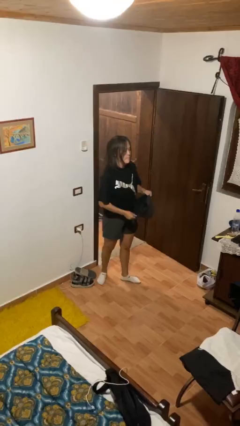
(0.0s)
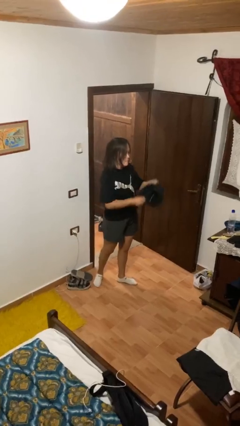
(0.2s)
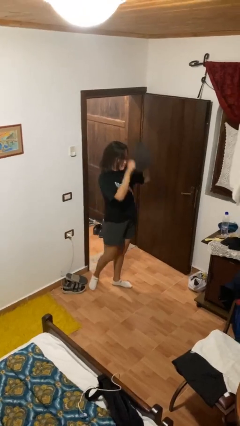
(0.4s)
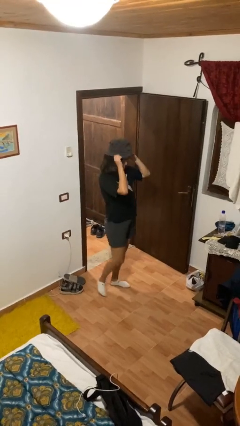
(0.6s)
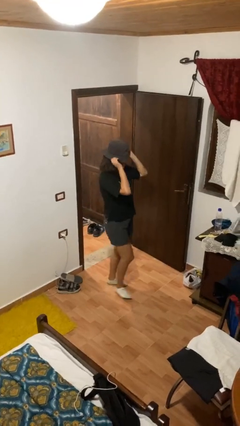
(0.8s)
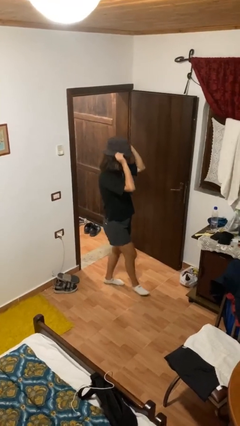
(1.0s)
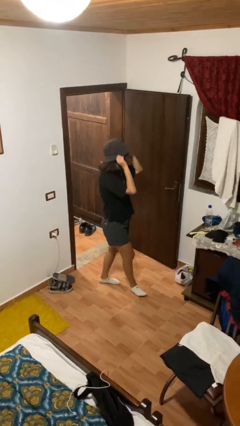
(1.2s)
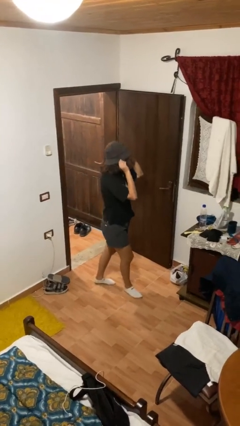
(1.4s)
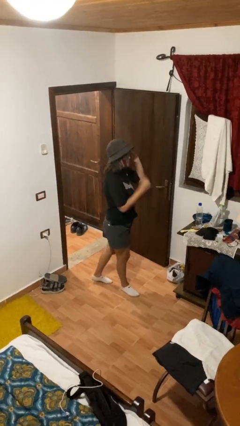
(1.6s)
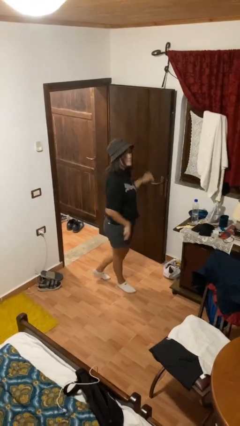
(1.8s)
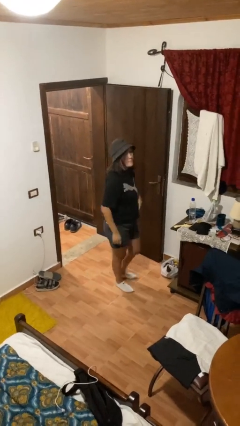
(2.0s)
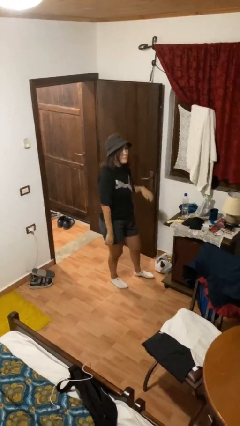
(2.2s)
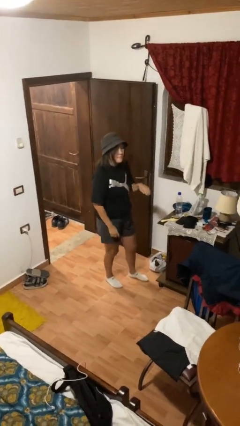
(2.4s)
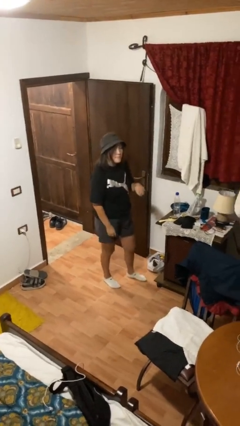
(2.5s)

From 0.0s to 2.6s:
person puts on hat

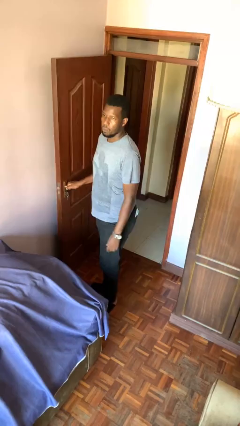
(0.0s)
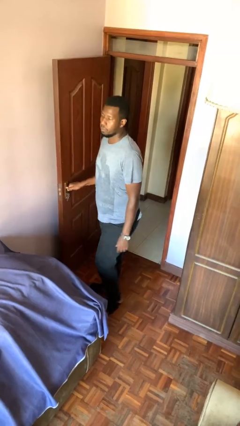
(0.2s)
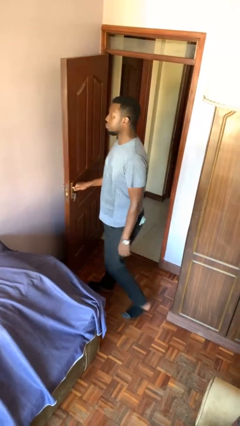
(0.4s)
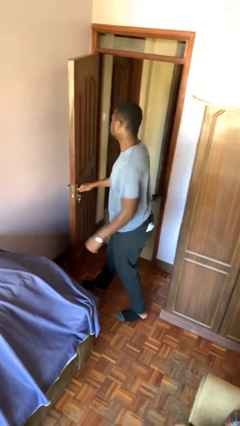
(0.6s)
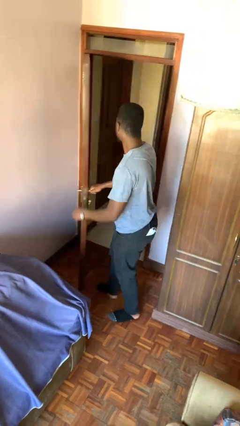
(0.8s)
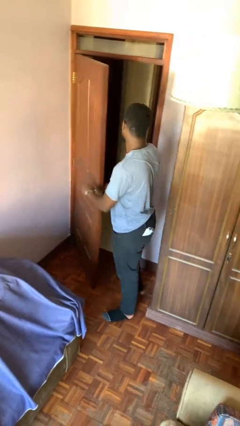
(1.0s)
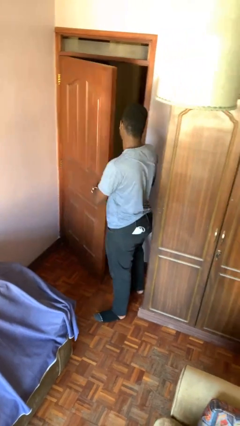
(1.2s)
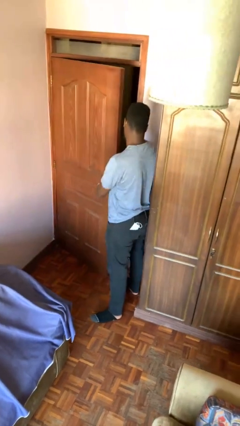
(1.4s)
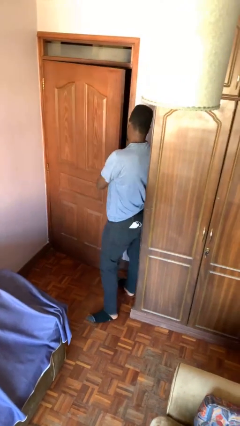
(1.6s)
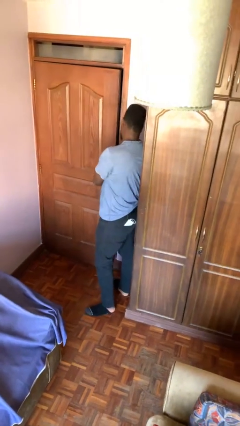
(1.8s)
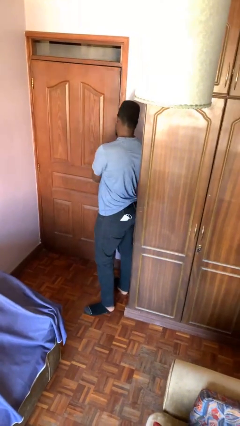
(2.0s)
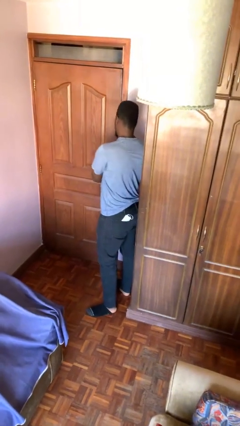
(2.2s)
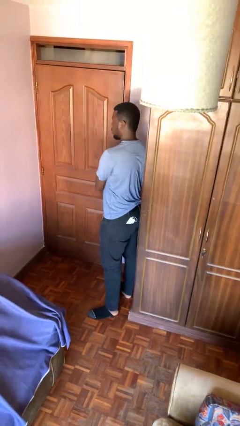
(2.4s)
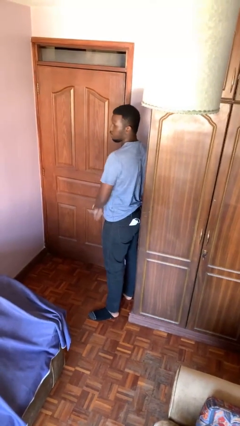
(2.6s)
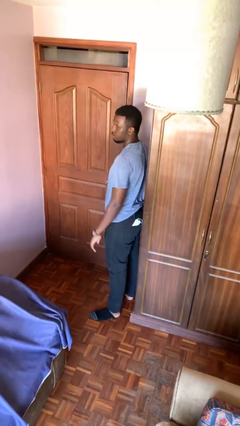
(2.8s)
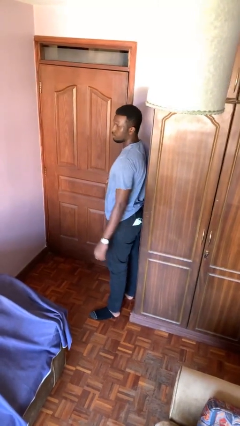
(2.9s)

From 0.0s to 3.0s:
person closes facility door

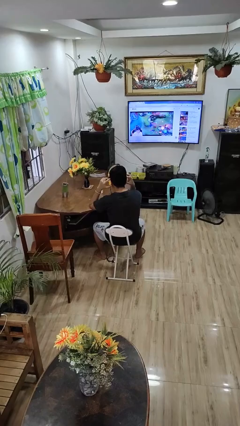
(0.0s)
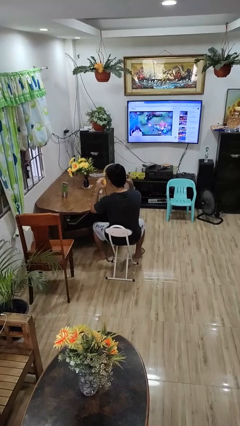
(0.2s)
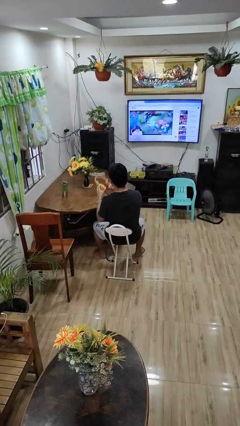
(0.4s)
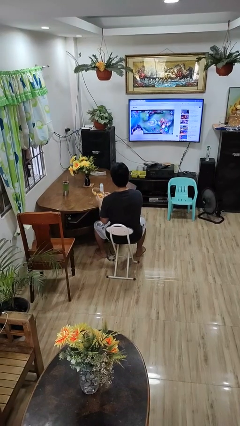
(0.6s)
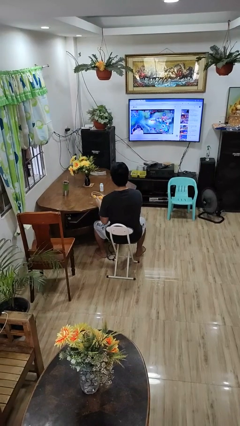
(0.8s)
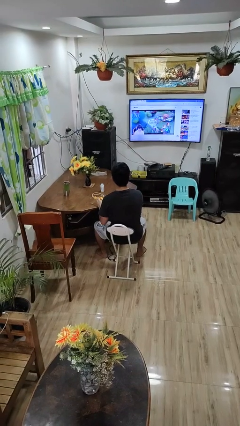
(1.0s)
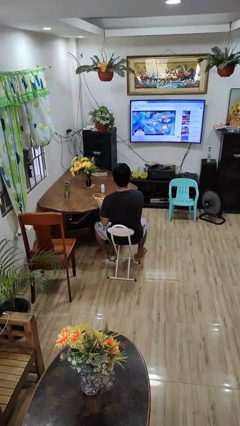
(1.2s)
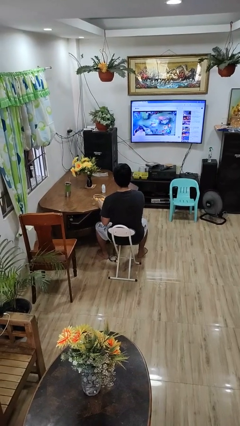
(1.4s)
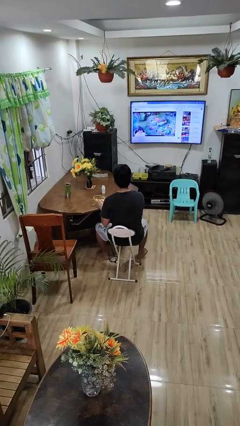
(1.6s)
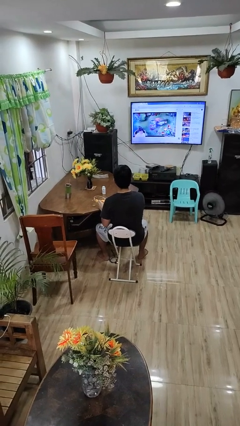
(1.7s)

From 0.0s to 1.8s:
person takes off headphones

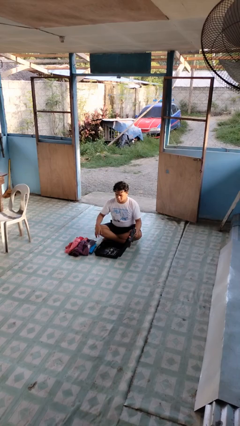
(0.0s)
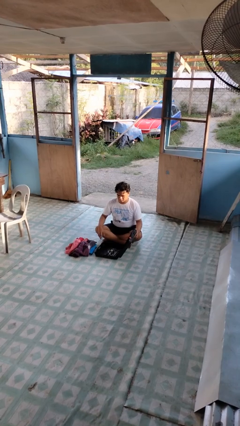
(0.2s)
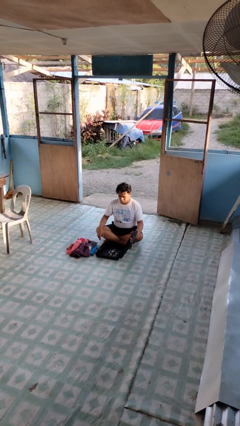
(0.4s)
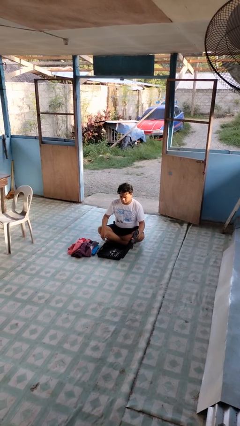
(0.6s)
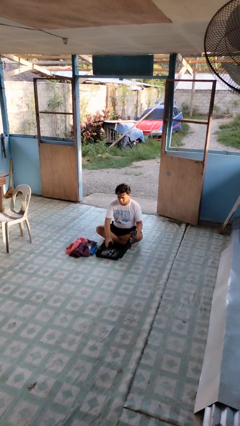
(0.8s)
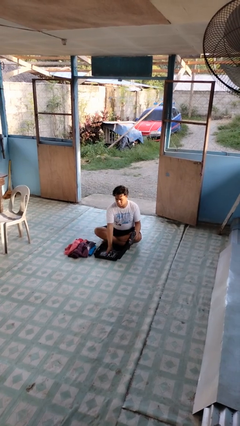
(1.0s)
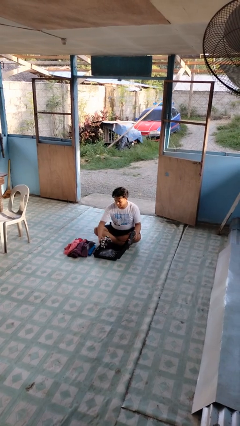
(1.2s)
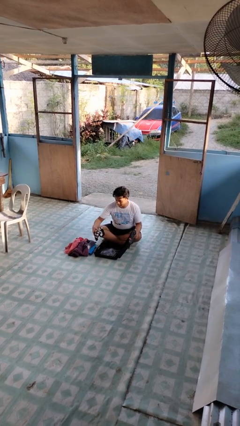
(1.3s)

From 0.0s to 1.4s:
person unloads clothes from suitcase

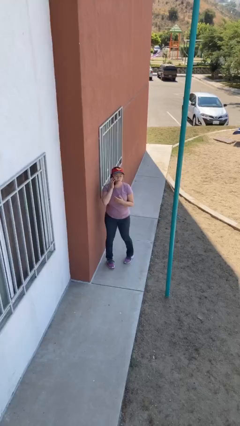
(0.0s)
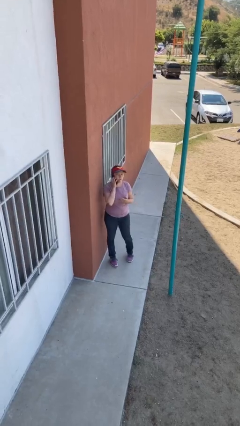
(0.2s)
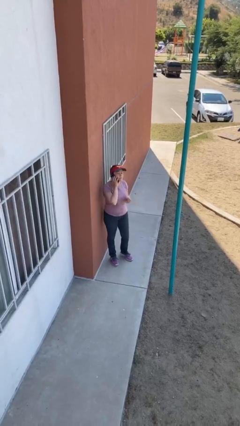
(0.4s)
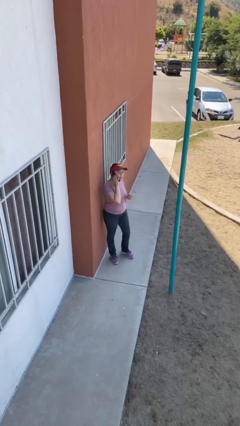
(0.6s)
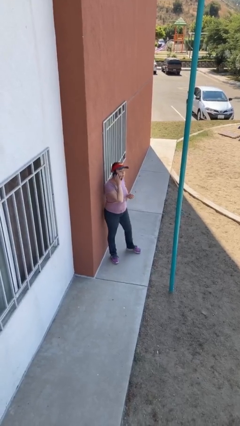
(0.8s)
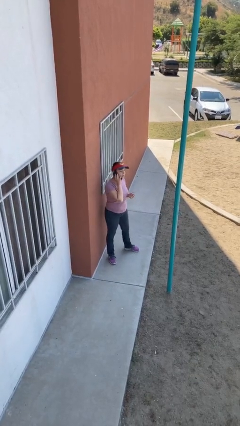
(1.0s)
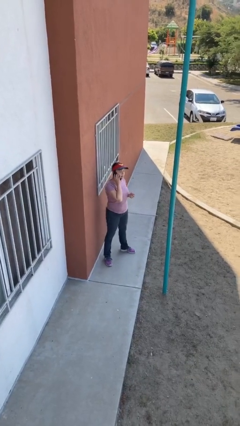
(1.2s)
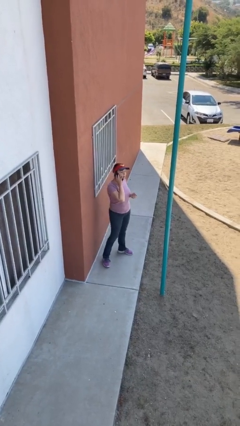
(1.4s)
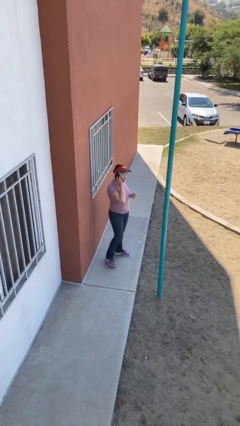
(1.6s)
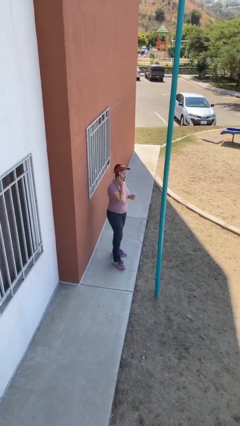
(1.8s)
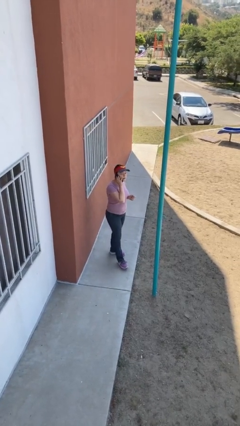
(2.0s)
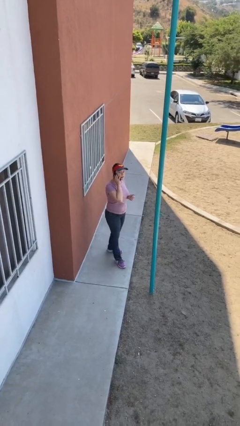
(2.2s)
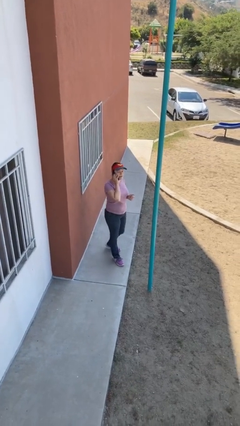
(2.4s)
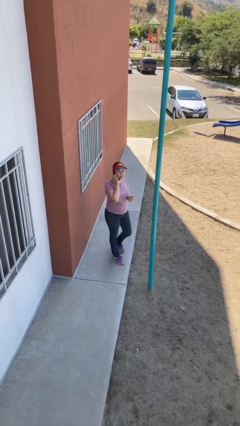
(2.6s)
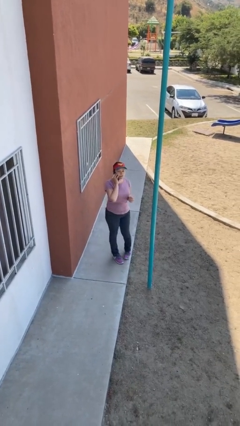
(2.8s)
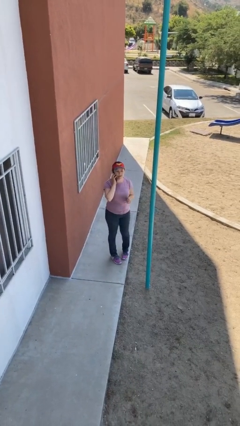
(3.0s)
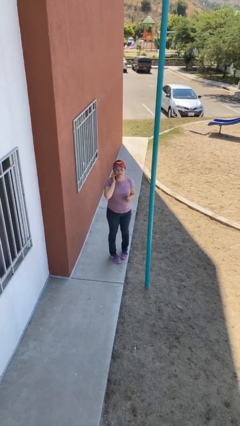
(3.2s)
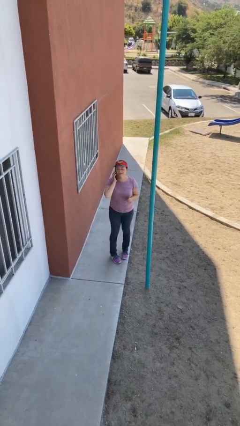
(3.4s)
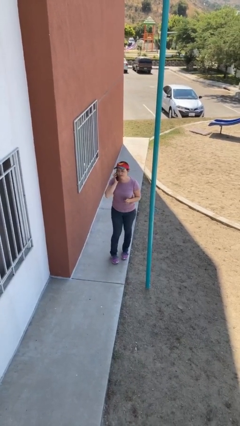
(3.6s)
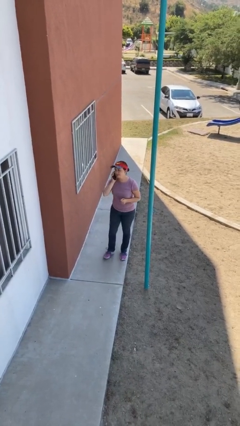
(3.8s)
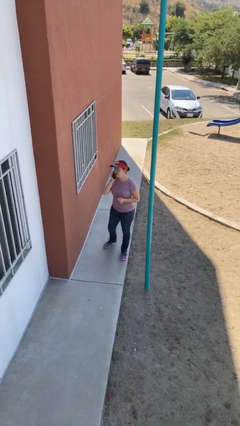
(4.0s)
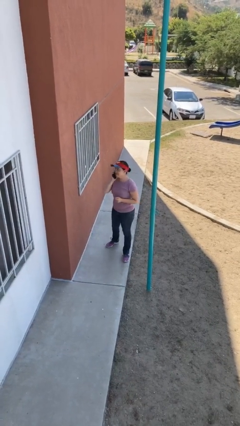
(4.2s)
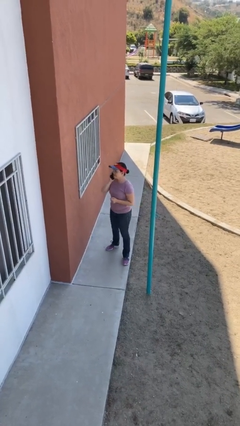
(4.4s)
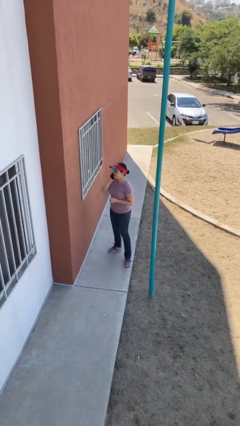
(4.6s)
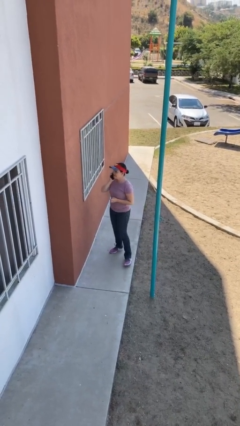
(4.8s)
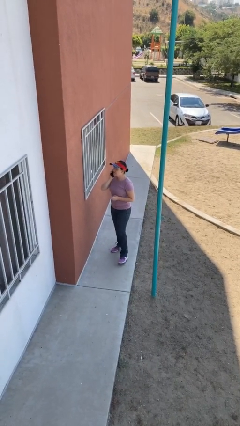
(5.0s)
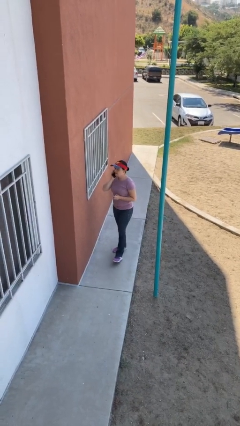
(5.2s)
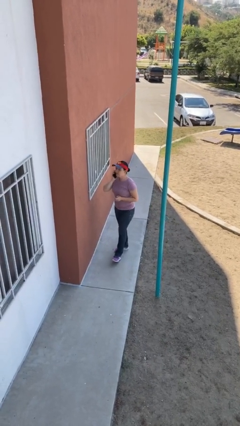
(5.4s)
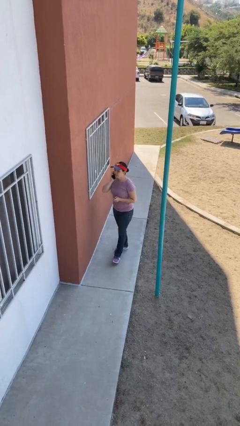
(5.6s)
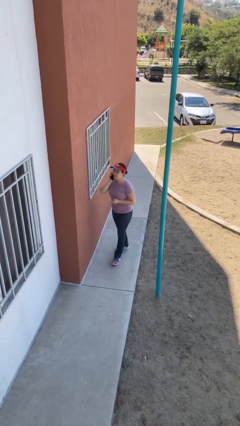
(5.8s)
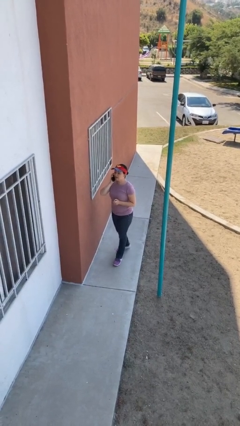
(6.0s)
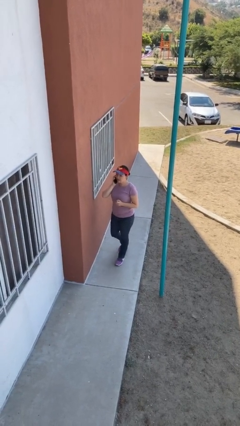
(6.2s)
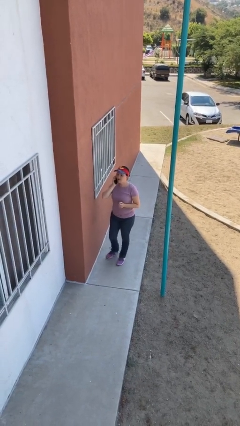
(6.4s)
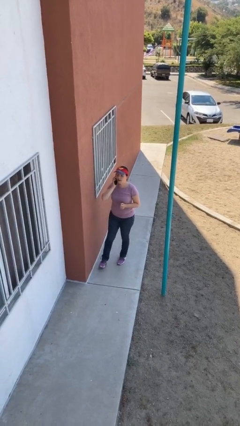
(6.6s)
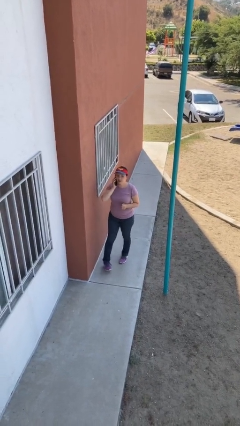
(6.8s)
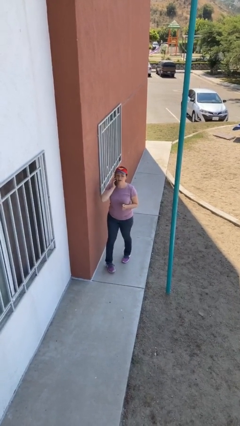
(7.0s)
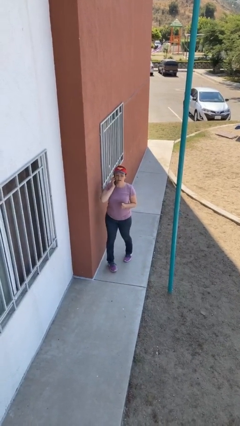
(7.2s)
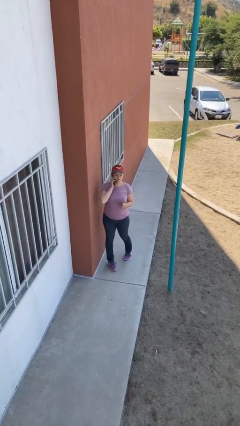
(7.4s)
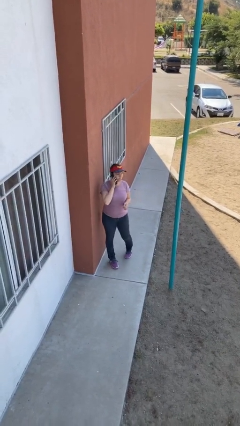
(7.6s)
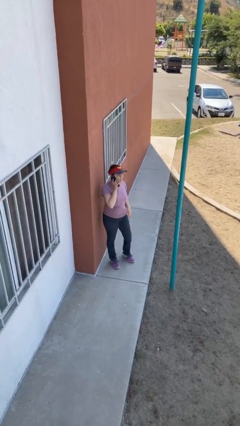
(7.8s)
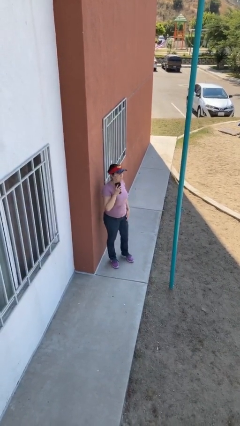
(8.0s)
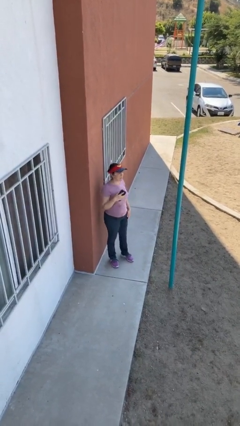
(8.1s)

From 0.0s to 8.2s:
person talks on phone

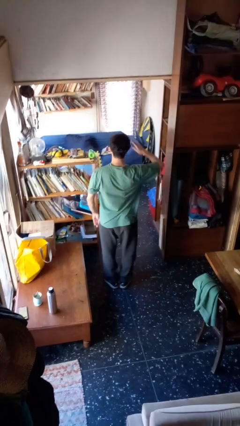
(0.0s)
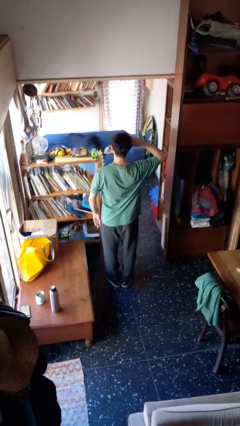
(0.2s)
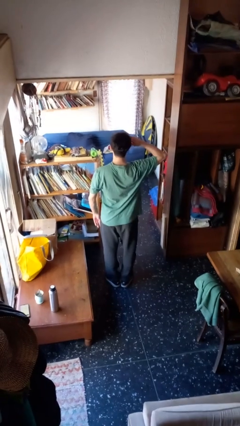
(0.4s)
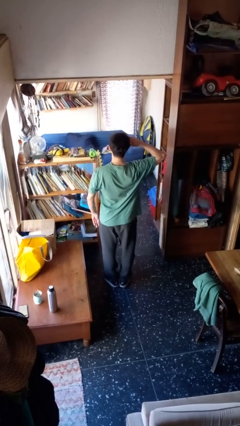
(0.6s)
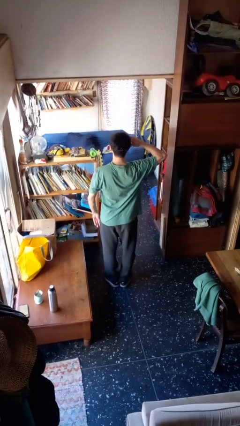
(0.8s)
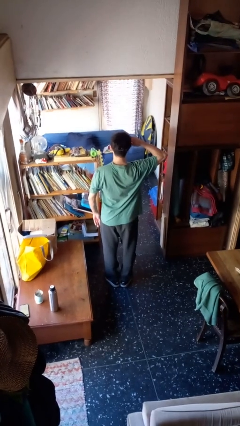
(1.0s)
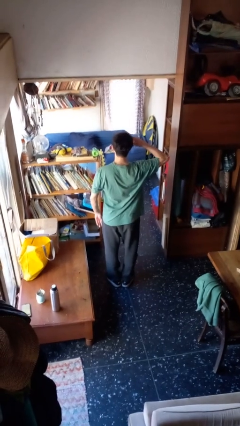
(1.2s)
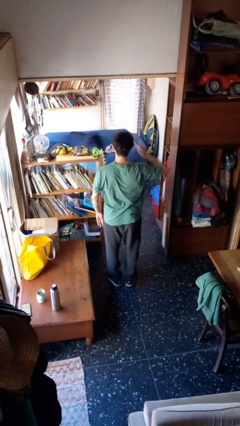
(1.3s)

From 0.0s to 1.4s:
person salutes
